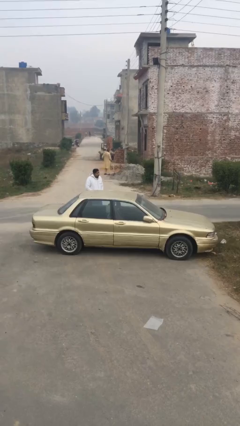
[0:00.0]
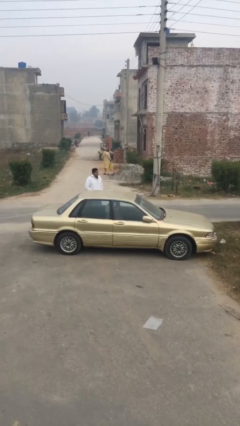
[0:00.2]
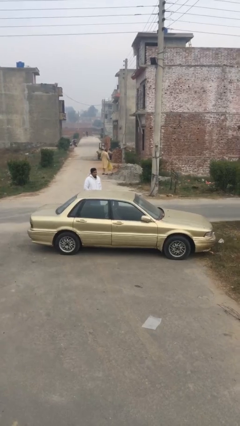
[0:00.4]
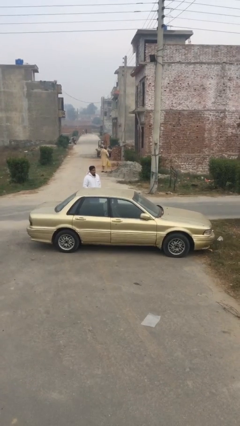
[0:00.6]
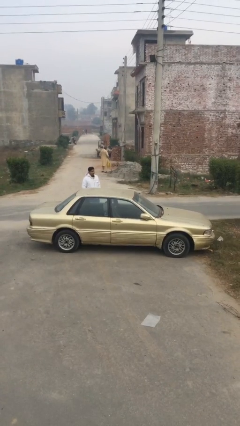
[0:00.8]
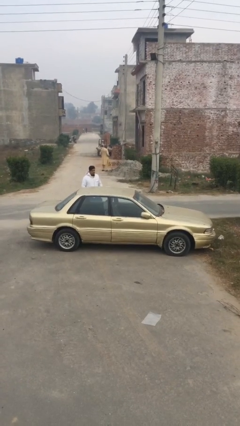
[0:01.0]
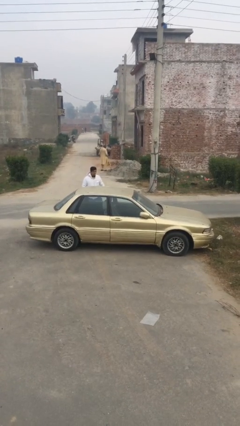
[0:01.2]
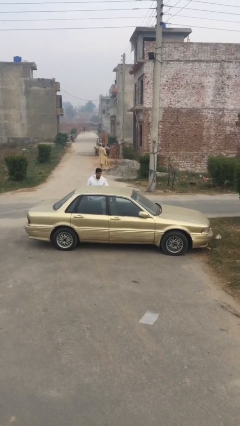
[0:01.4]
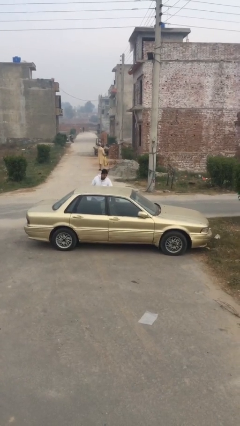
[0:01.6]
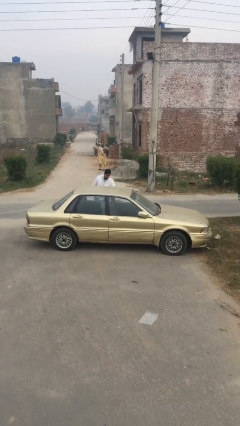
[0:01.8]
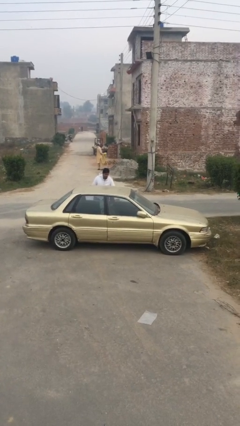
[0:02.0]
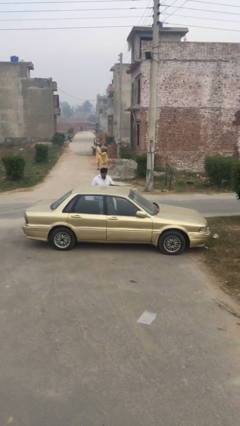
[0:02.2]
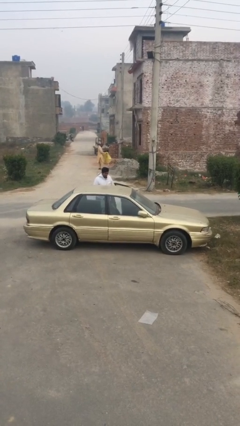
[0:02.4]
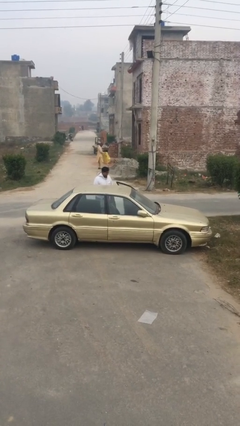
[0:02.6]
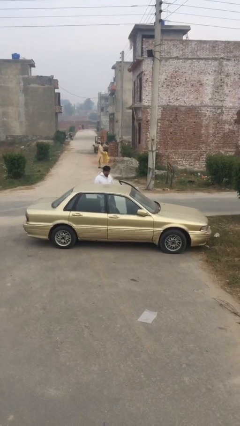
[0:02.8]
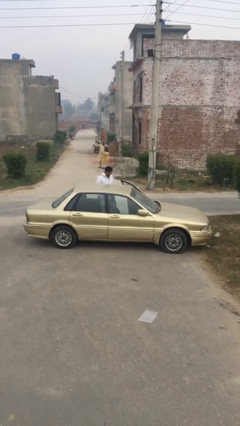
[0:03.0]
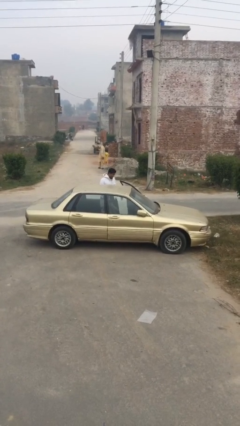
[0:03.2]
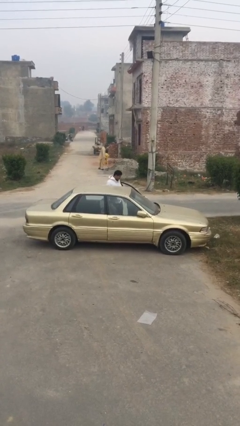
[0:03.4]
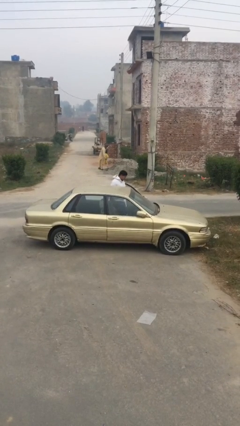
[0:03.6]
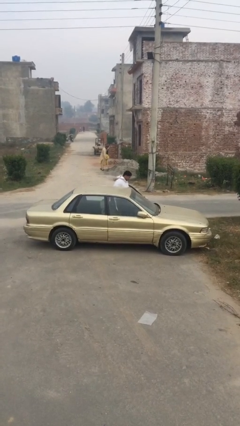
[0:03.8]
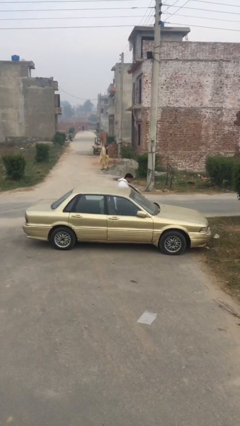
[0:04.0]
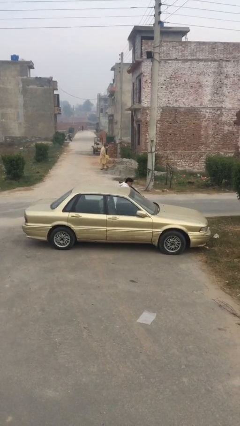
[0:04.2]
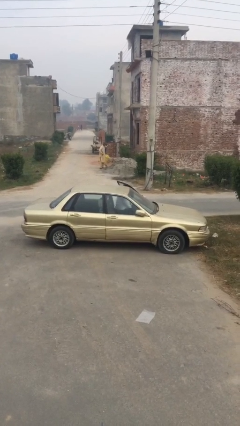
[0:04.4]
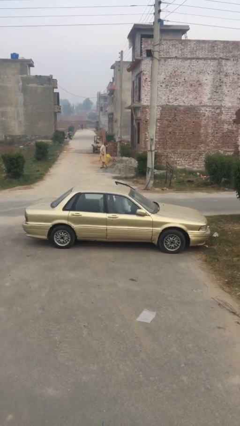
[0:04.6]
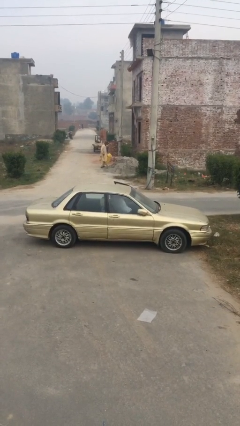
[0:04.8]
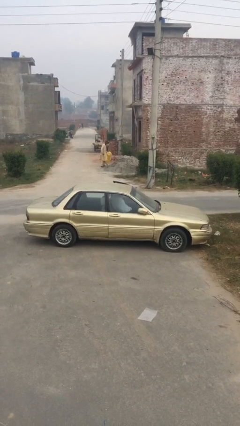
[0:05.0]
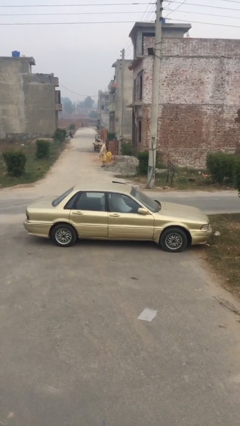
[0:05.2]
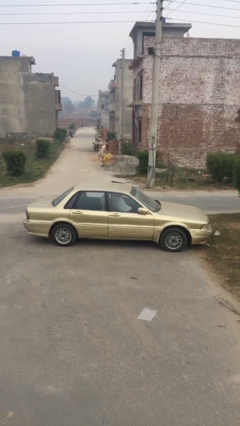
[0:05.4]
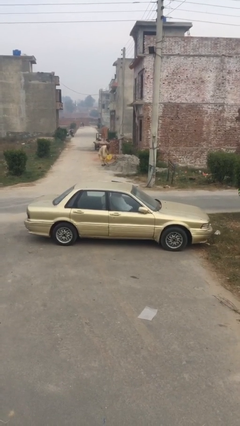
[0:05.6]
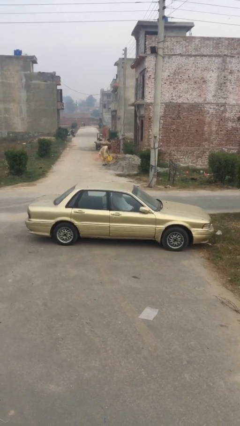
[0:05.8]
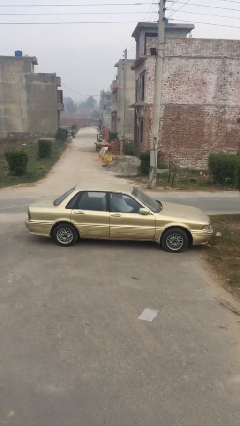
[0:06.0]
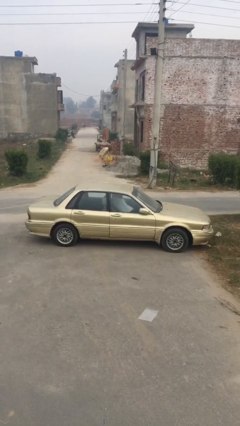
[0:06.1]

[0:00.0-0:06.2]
car picks up person

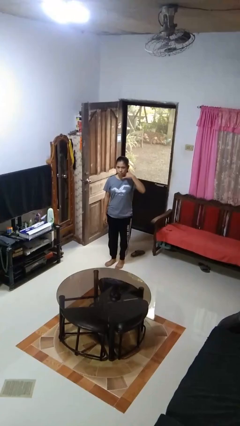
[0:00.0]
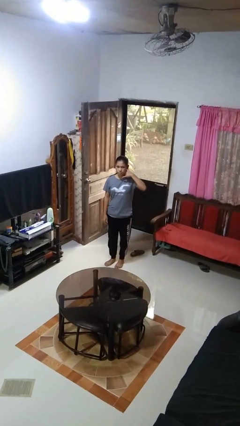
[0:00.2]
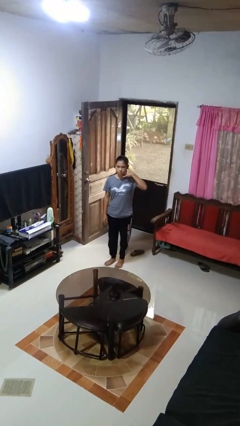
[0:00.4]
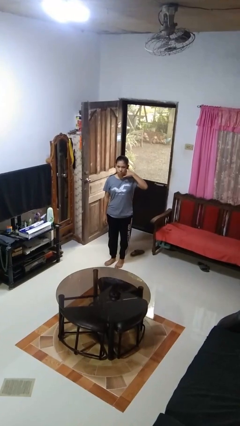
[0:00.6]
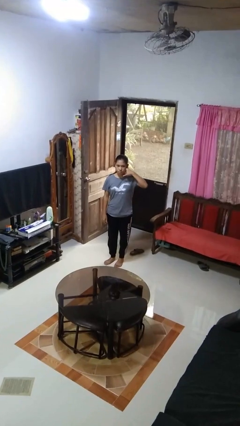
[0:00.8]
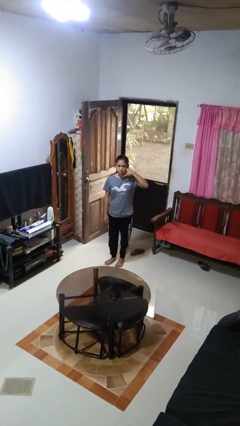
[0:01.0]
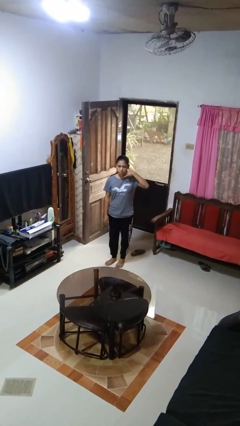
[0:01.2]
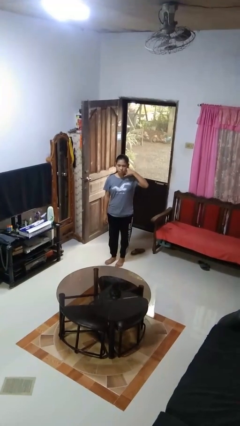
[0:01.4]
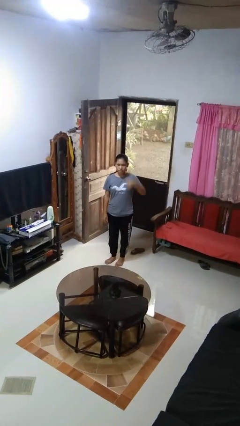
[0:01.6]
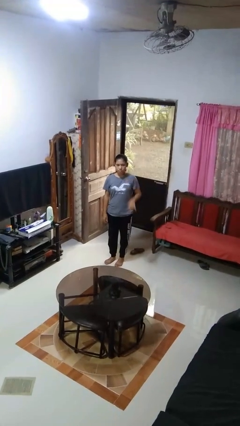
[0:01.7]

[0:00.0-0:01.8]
person gestures call me

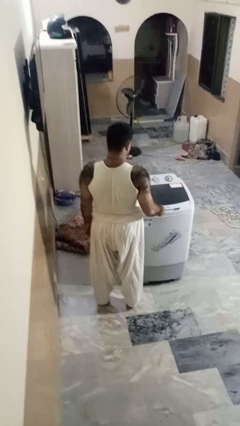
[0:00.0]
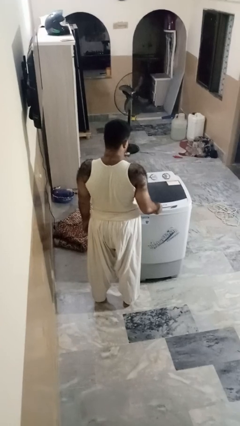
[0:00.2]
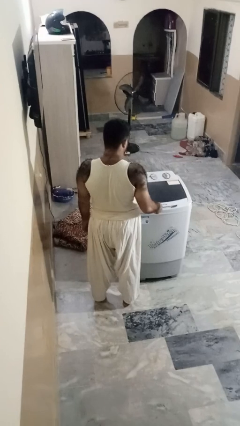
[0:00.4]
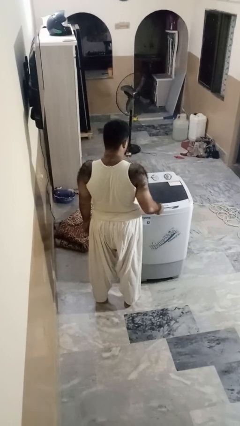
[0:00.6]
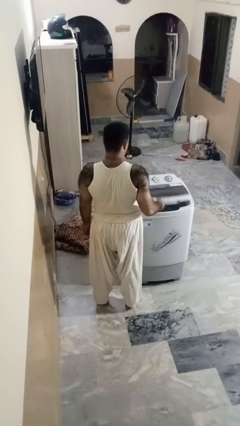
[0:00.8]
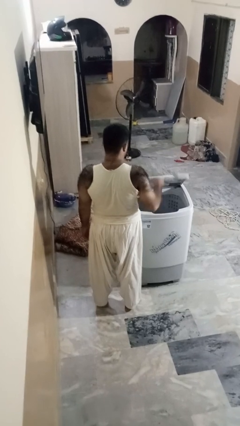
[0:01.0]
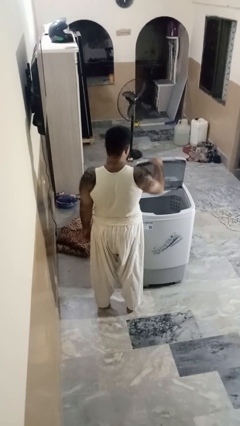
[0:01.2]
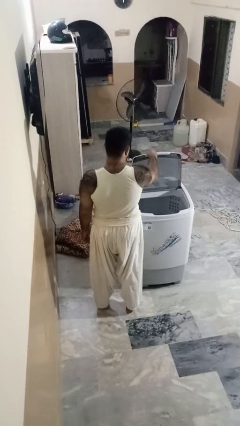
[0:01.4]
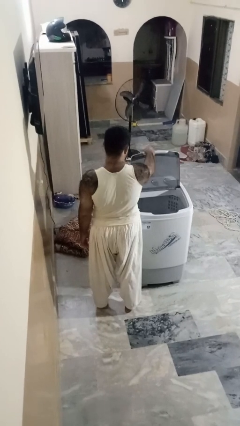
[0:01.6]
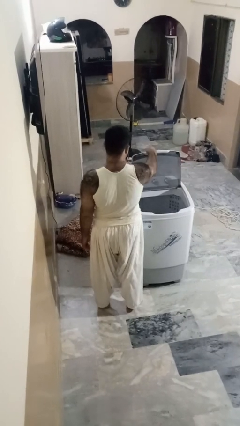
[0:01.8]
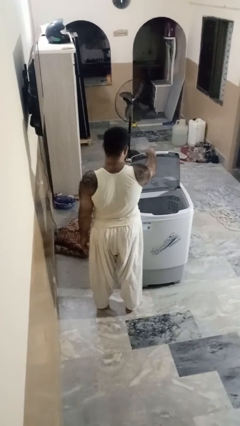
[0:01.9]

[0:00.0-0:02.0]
person opens clothes washer

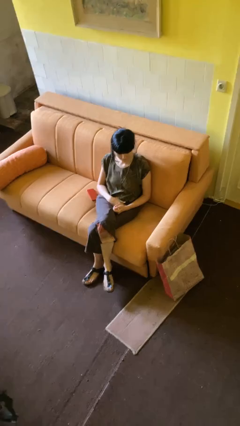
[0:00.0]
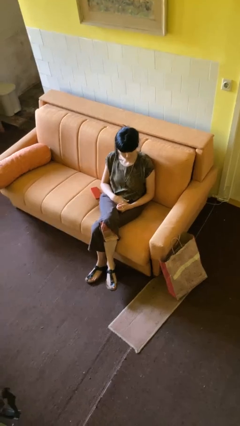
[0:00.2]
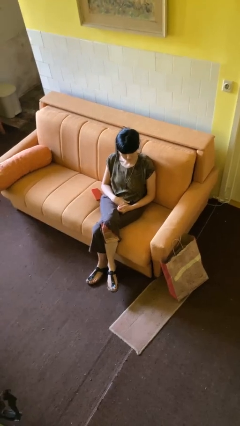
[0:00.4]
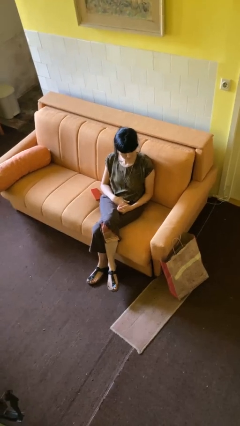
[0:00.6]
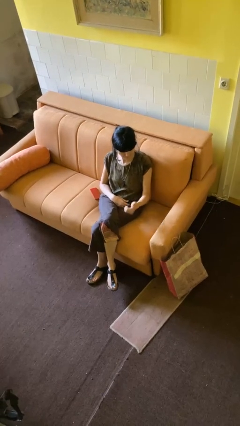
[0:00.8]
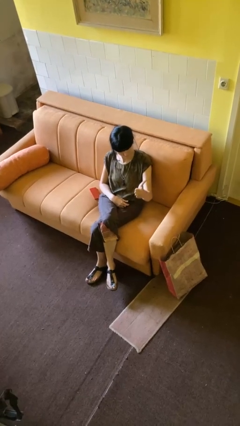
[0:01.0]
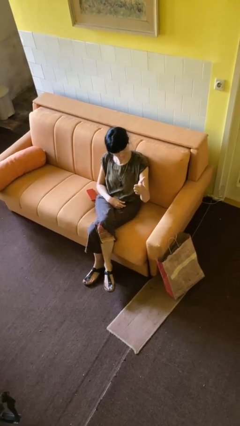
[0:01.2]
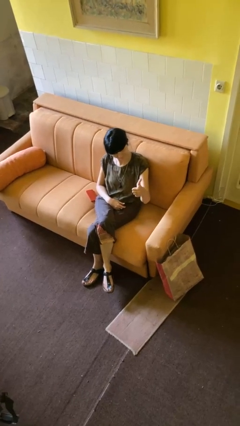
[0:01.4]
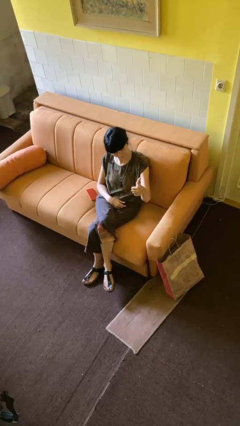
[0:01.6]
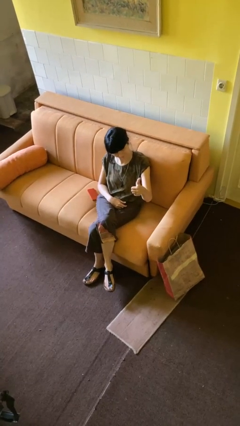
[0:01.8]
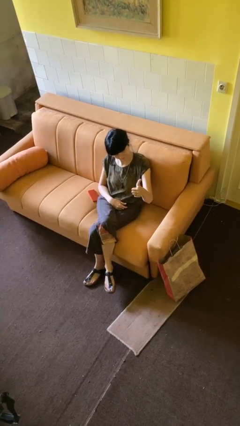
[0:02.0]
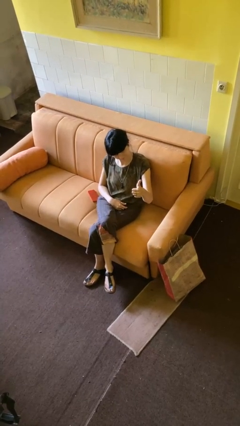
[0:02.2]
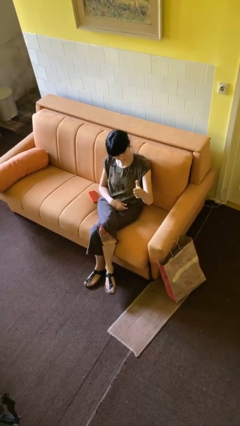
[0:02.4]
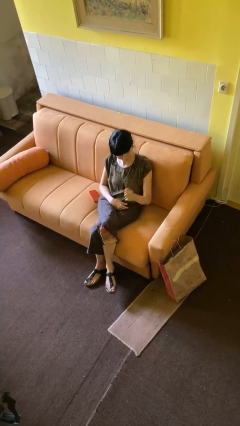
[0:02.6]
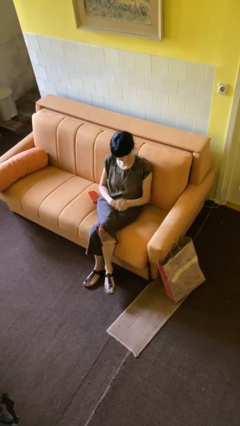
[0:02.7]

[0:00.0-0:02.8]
person gestures thumbs up

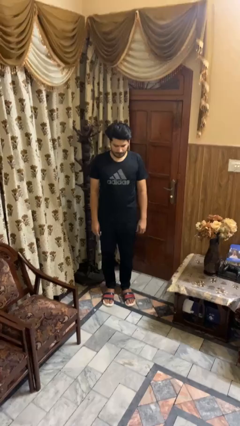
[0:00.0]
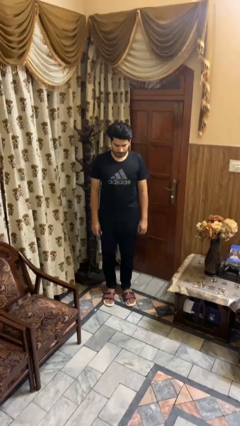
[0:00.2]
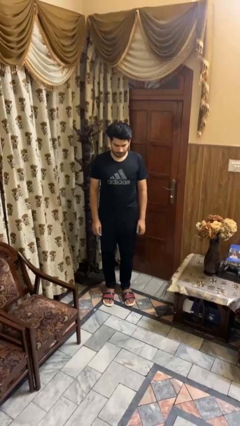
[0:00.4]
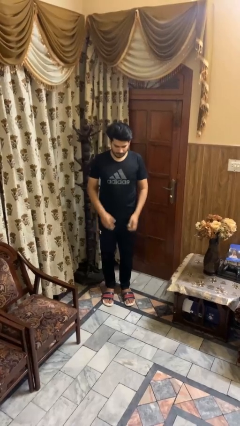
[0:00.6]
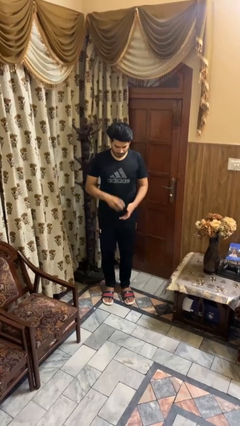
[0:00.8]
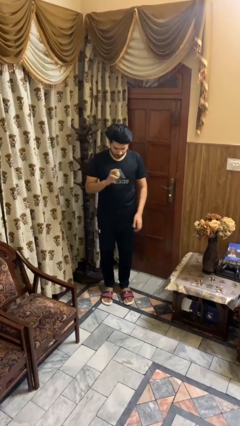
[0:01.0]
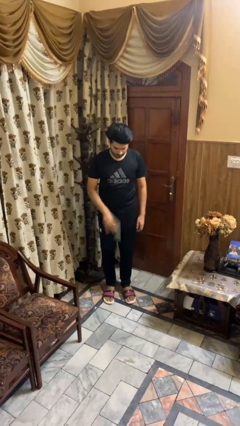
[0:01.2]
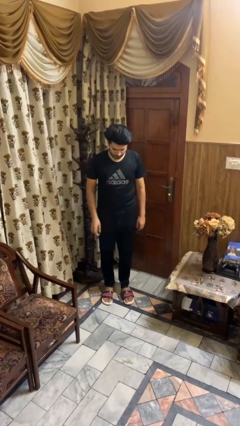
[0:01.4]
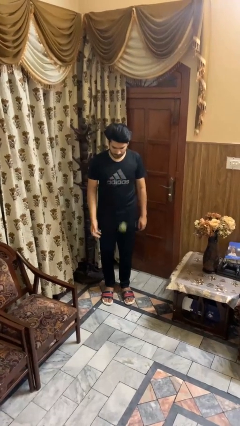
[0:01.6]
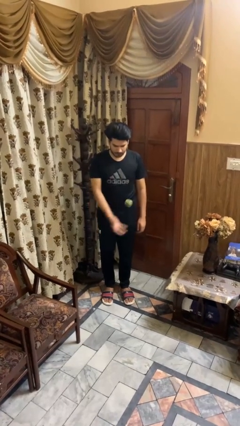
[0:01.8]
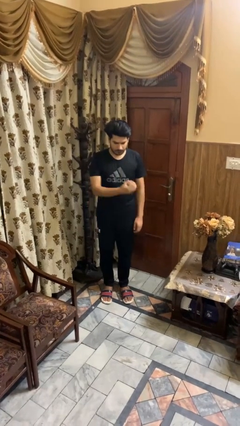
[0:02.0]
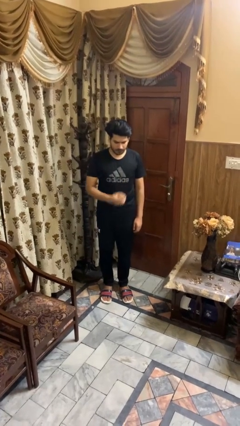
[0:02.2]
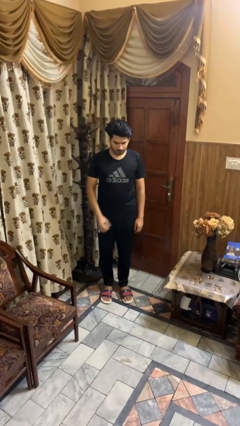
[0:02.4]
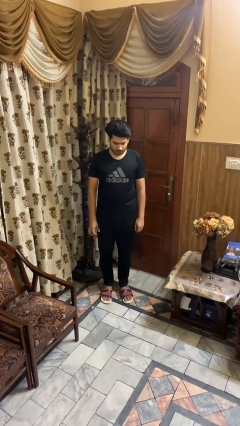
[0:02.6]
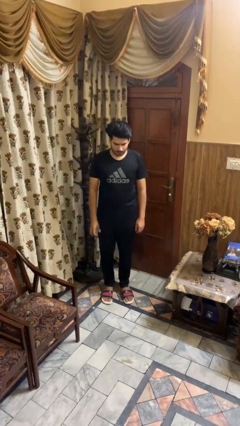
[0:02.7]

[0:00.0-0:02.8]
person bounces ball on floor

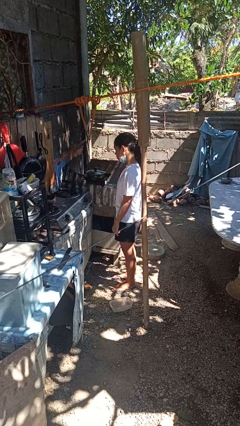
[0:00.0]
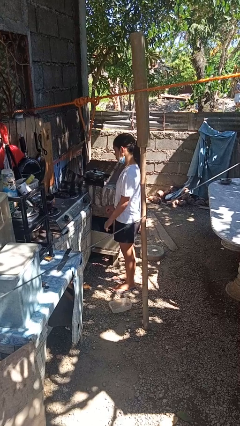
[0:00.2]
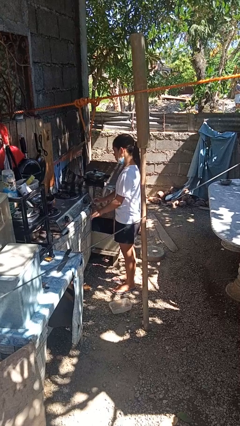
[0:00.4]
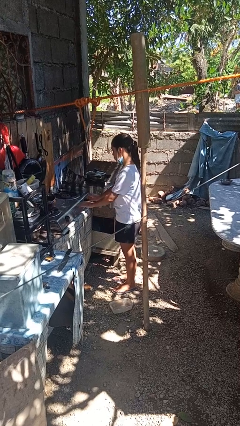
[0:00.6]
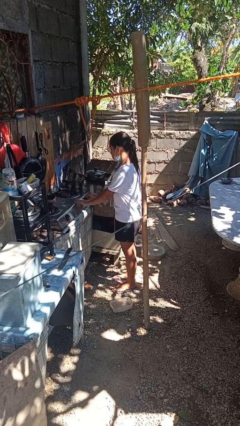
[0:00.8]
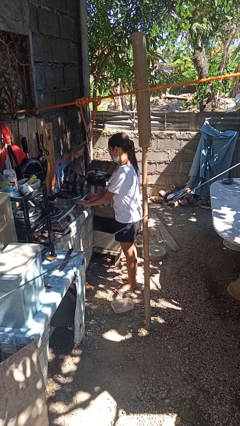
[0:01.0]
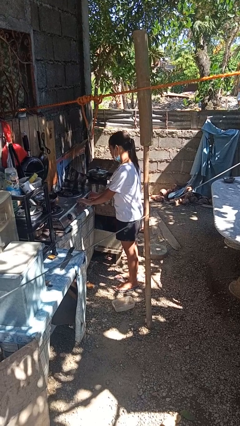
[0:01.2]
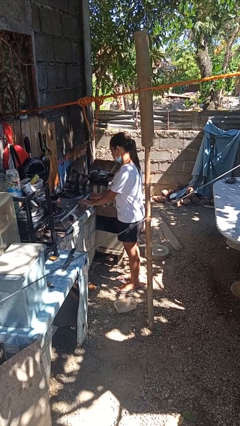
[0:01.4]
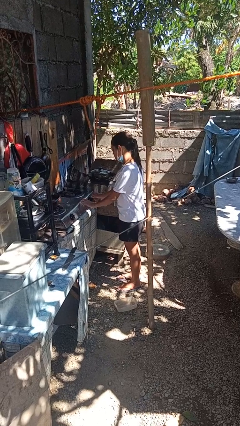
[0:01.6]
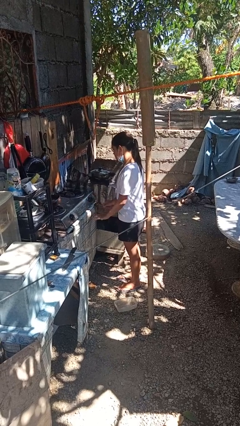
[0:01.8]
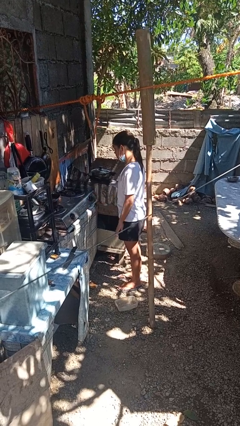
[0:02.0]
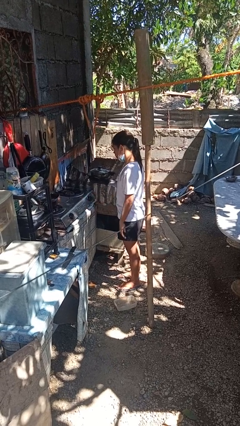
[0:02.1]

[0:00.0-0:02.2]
person turns off stovetop
